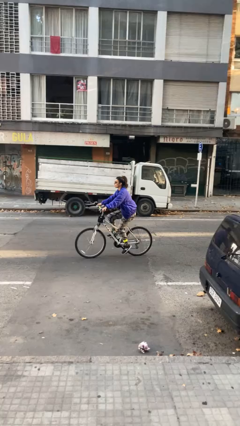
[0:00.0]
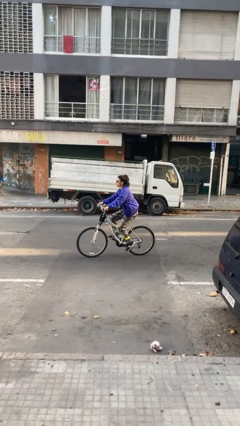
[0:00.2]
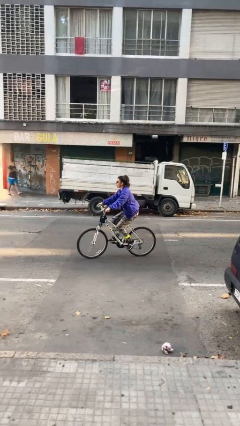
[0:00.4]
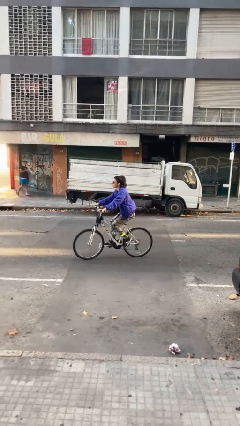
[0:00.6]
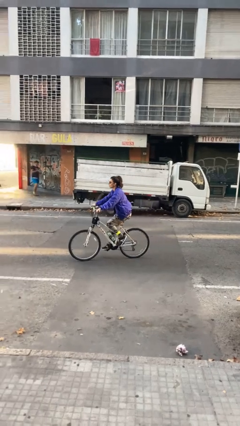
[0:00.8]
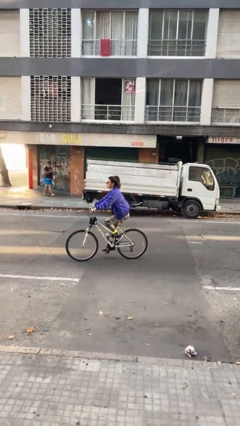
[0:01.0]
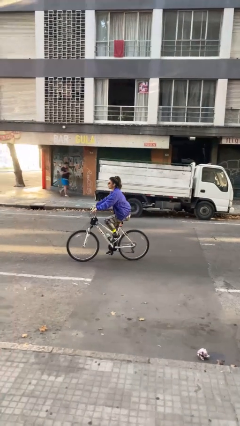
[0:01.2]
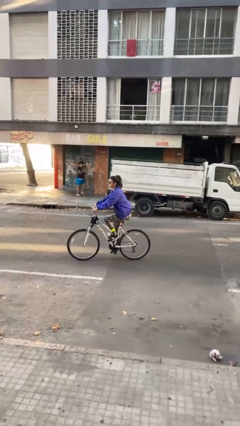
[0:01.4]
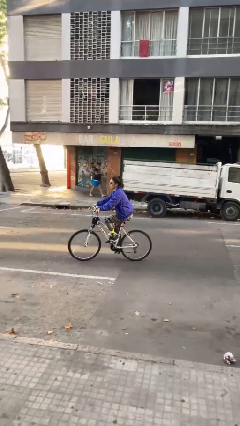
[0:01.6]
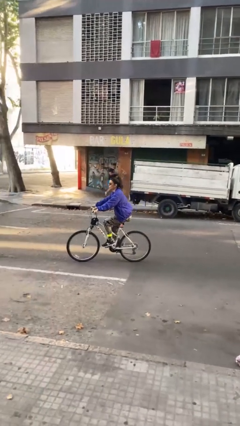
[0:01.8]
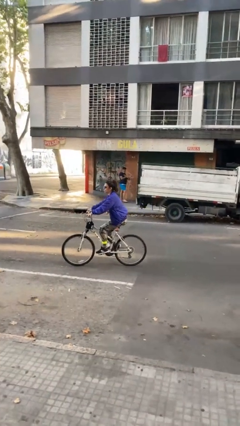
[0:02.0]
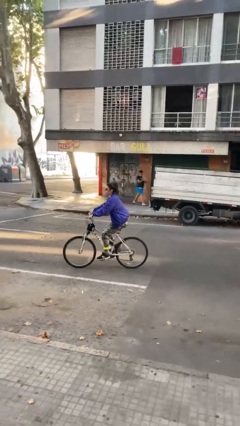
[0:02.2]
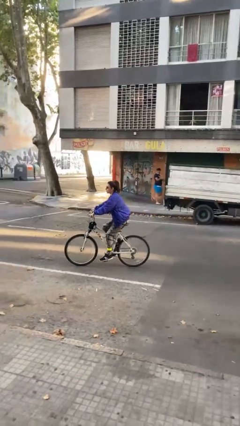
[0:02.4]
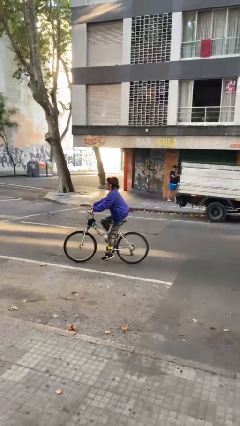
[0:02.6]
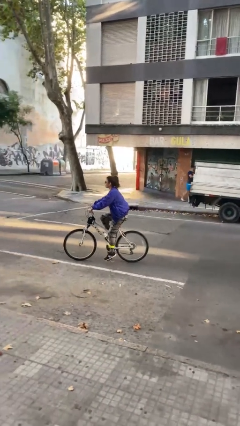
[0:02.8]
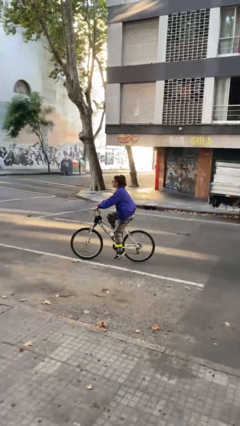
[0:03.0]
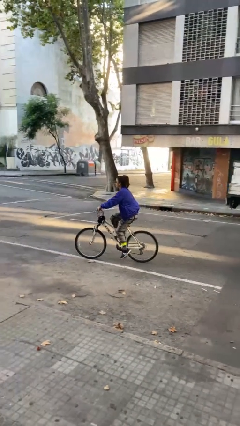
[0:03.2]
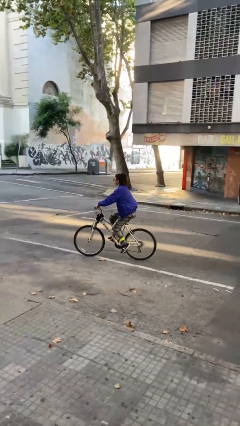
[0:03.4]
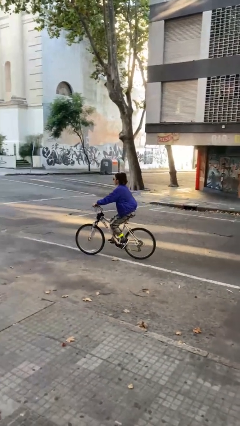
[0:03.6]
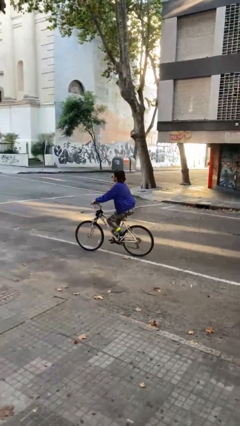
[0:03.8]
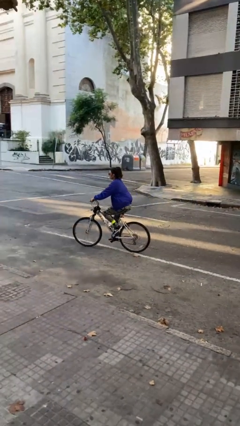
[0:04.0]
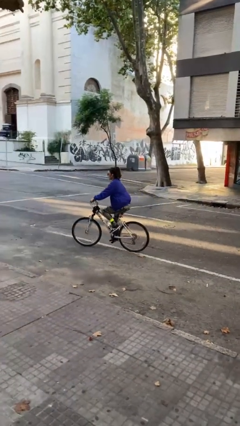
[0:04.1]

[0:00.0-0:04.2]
person rides bicycle

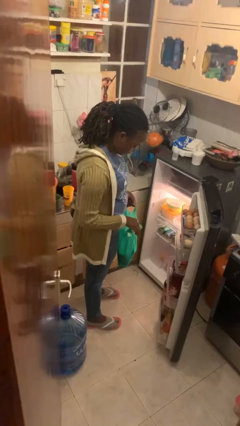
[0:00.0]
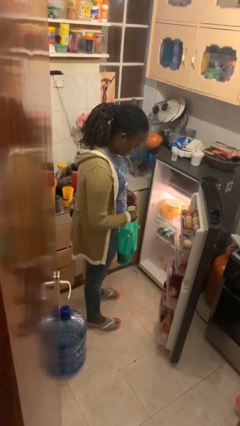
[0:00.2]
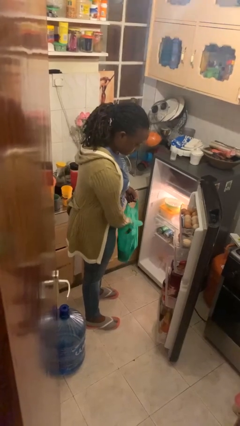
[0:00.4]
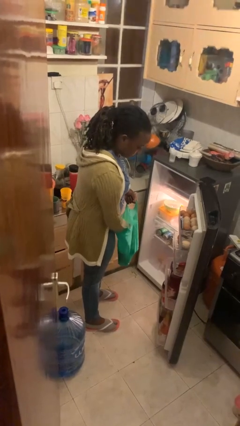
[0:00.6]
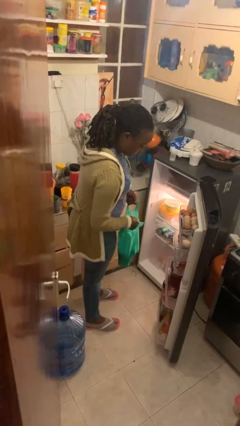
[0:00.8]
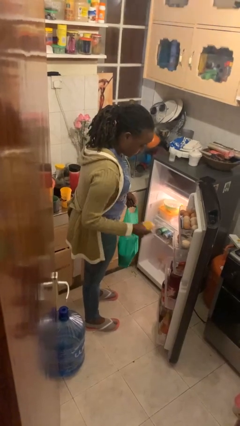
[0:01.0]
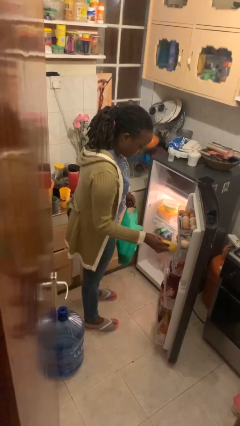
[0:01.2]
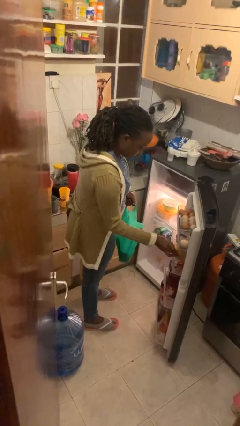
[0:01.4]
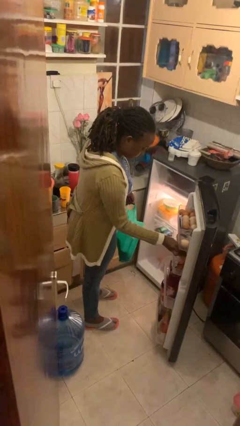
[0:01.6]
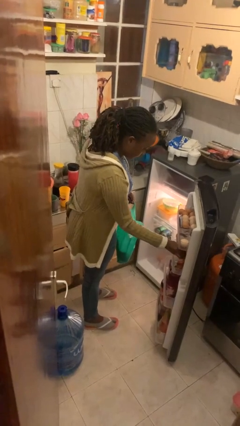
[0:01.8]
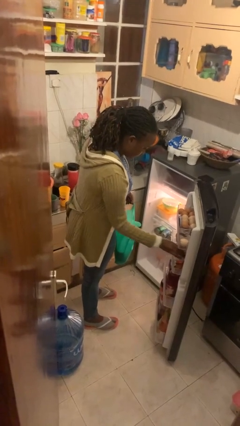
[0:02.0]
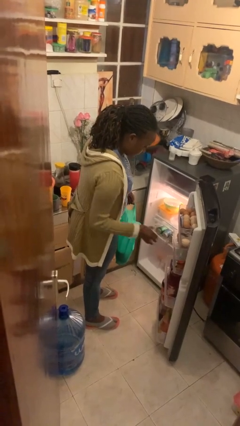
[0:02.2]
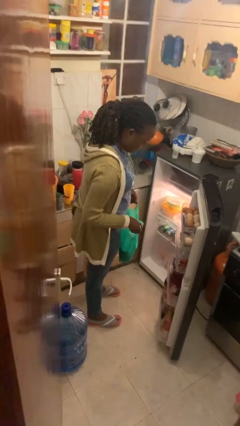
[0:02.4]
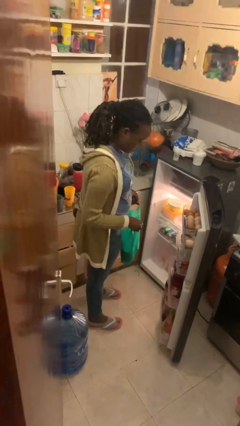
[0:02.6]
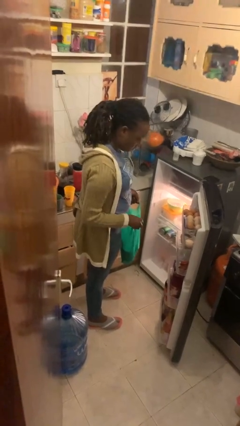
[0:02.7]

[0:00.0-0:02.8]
person loads groceries into refrigerator

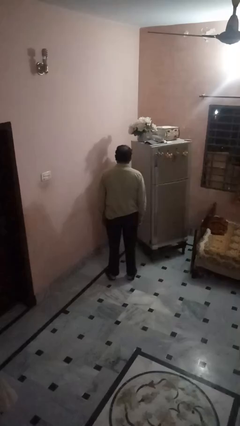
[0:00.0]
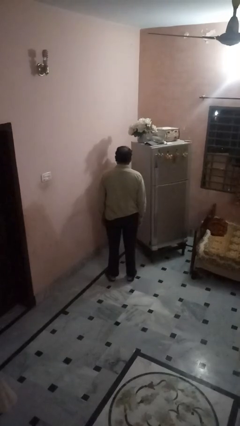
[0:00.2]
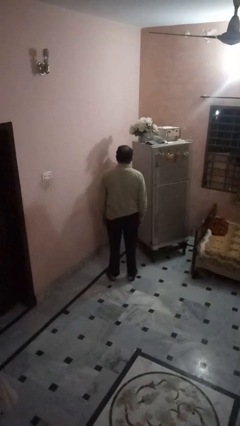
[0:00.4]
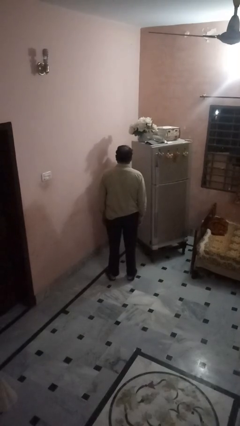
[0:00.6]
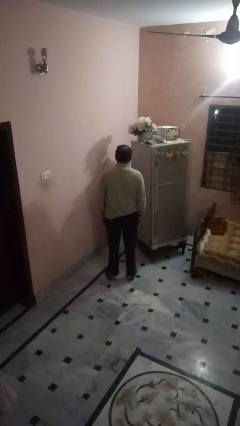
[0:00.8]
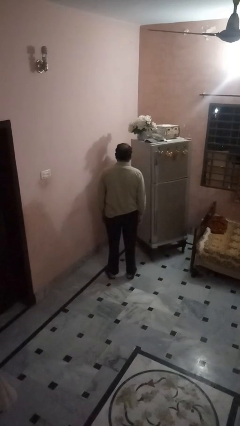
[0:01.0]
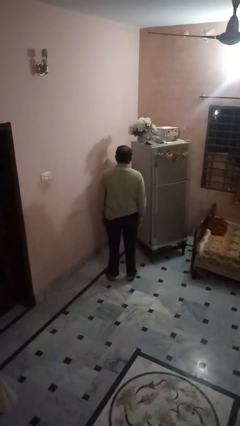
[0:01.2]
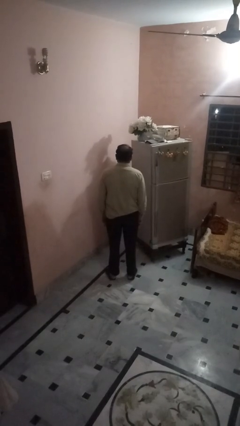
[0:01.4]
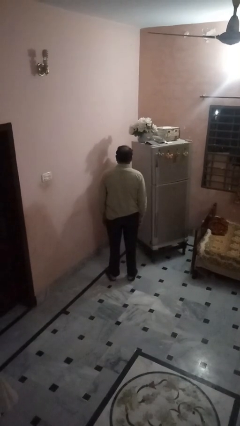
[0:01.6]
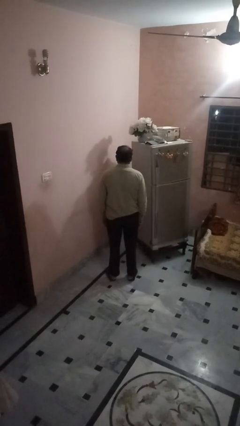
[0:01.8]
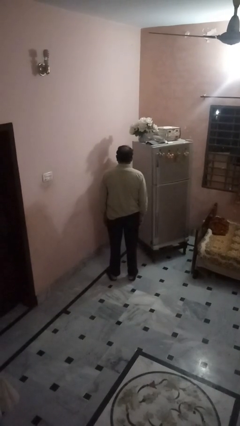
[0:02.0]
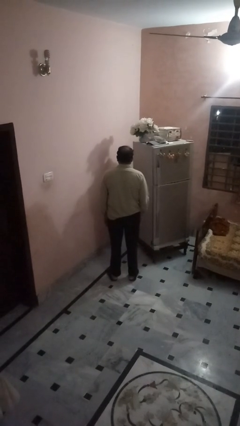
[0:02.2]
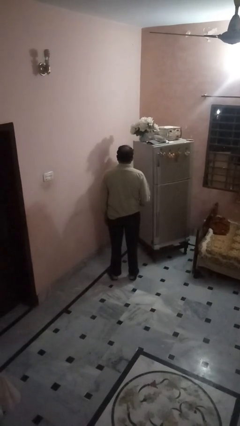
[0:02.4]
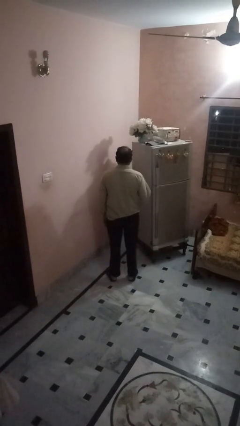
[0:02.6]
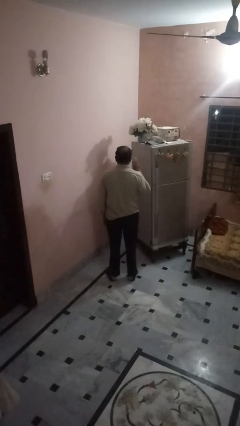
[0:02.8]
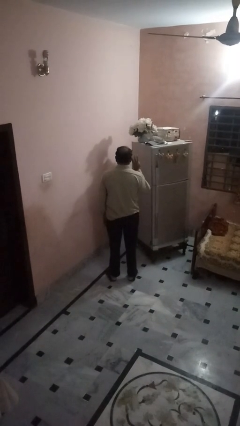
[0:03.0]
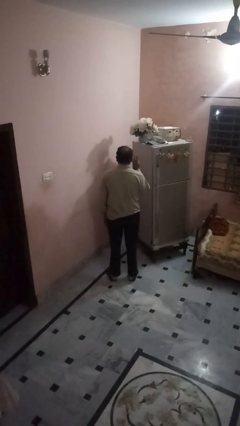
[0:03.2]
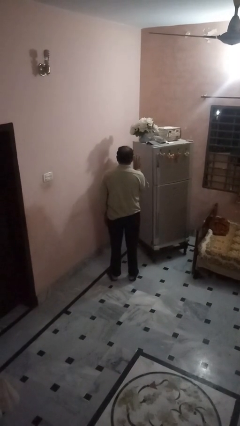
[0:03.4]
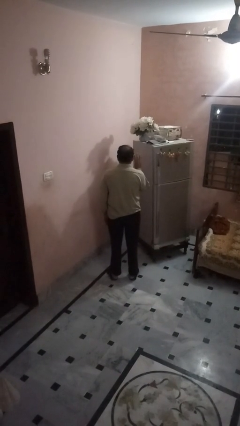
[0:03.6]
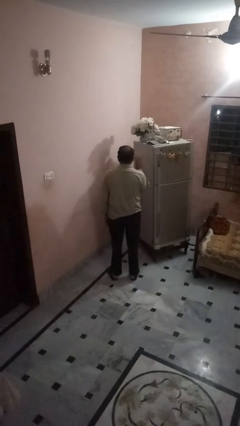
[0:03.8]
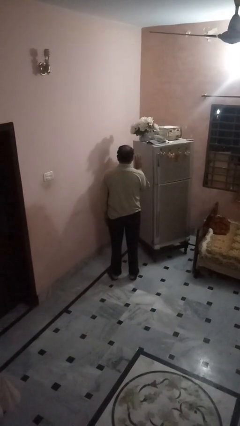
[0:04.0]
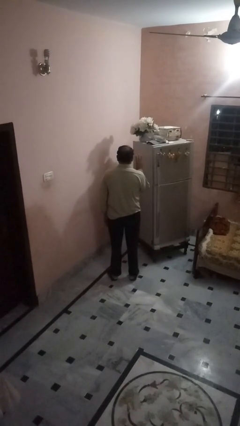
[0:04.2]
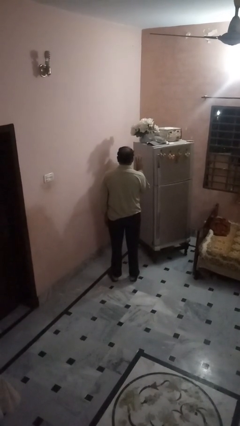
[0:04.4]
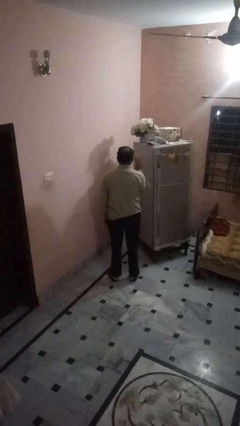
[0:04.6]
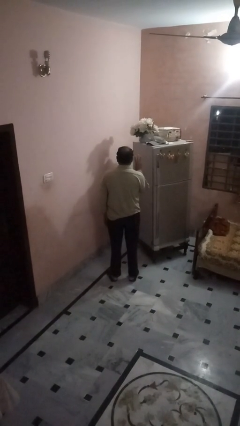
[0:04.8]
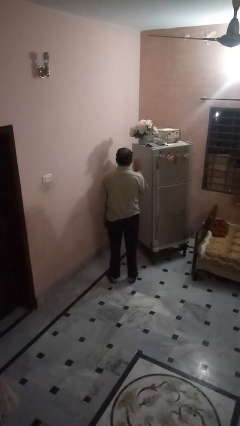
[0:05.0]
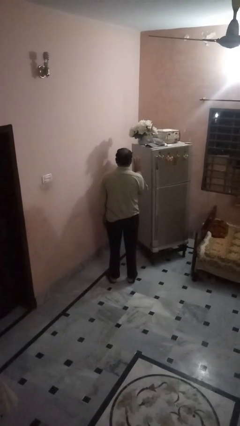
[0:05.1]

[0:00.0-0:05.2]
person gestures number three

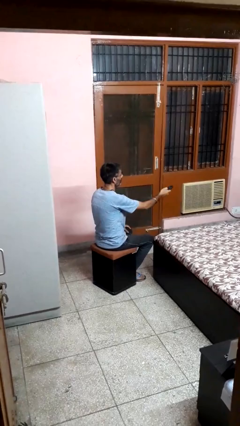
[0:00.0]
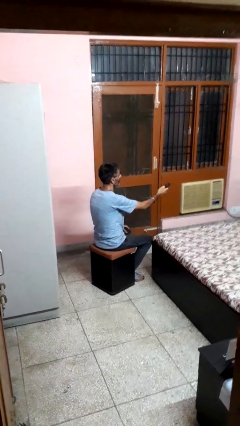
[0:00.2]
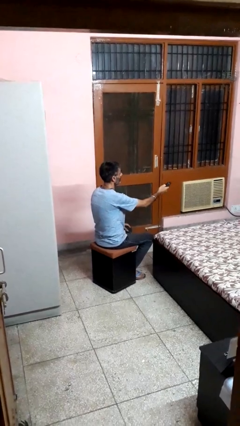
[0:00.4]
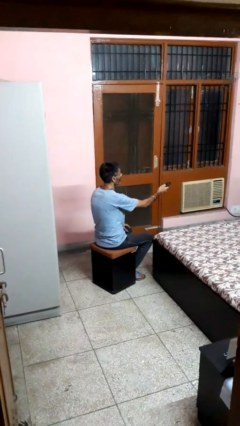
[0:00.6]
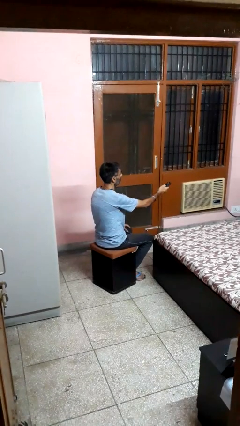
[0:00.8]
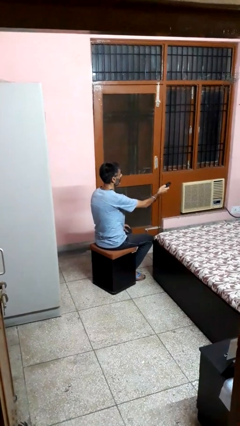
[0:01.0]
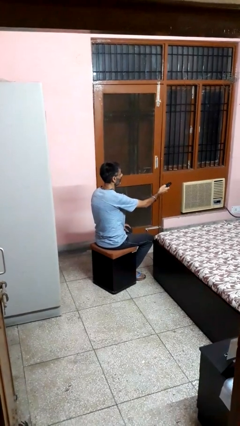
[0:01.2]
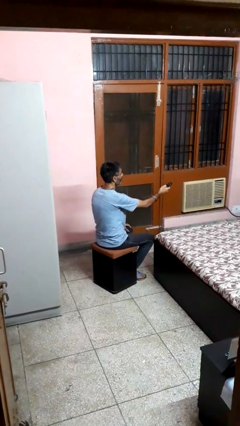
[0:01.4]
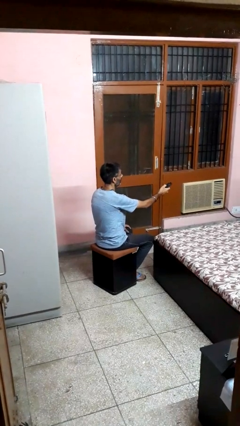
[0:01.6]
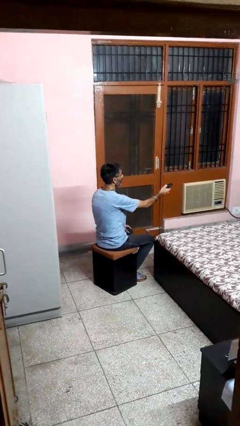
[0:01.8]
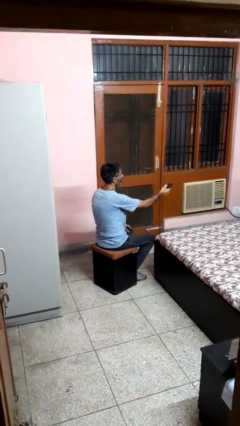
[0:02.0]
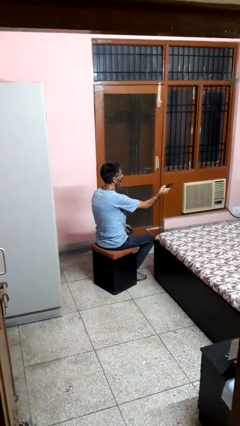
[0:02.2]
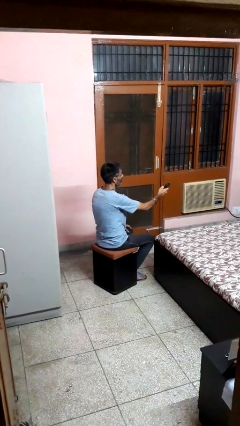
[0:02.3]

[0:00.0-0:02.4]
person uses television remote

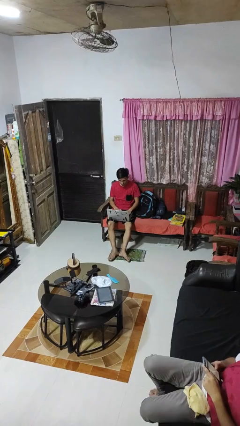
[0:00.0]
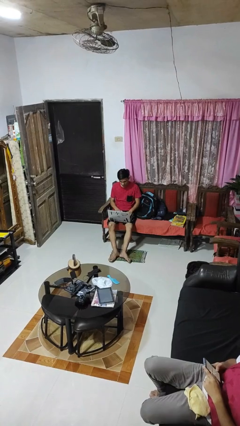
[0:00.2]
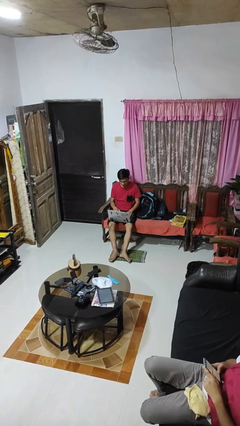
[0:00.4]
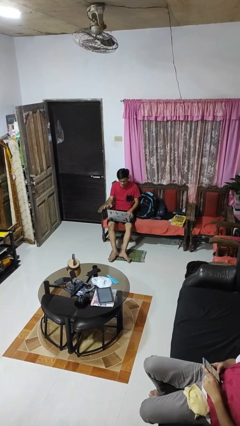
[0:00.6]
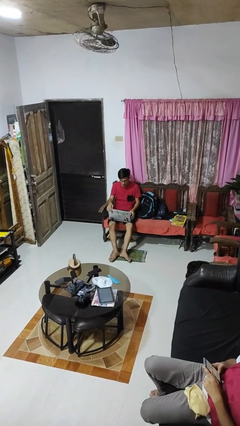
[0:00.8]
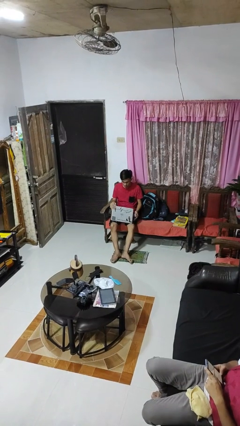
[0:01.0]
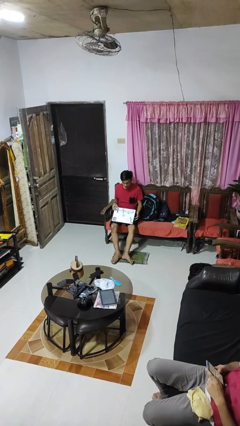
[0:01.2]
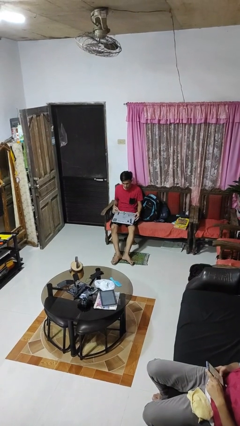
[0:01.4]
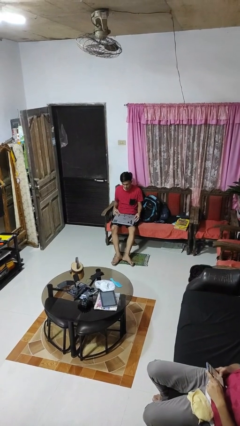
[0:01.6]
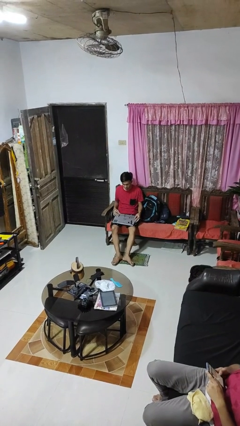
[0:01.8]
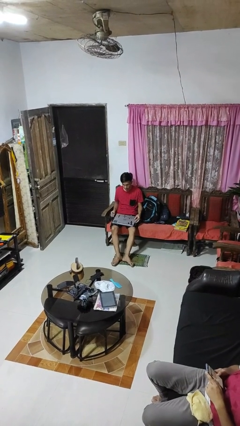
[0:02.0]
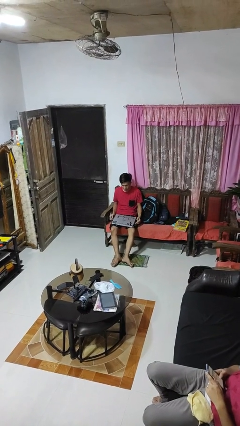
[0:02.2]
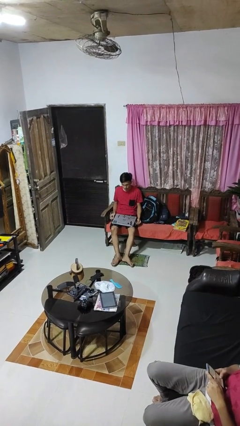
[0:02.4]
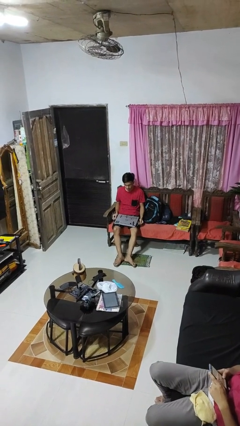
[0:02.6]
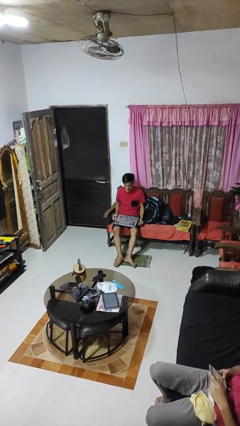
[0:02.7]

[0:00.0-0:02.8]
person closes laptop

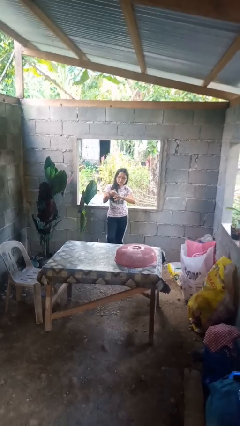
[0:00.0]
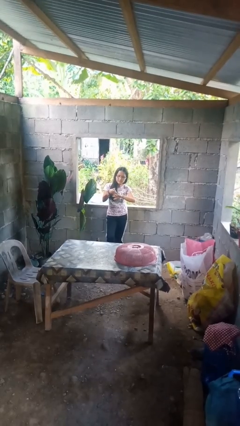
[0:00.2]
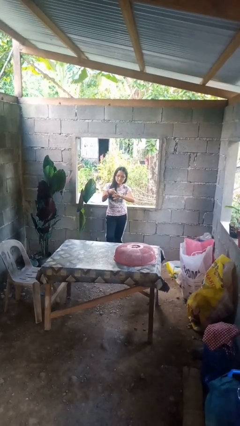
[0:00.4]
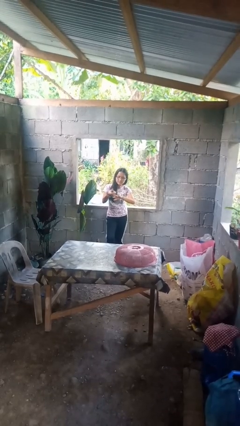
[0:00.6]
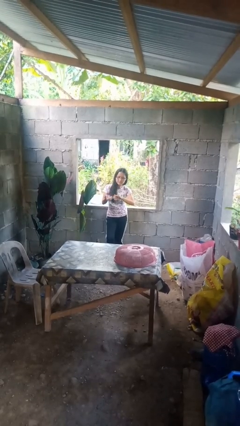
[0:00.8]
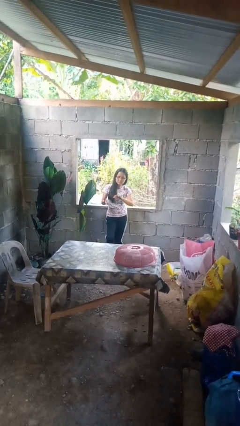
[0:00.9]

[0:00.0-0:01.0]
person clips fingernails
